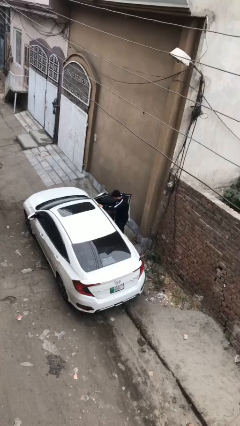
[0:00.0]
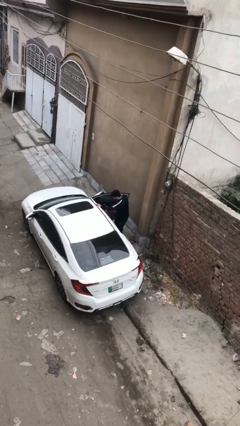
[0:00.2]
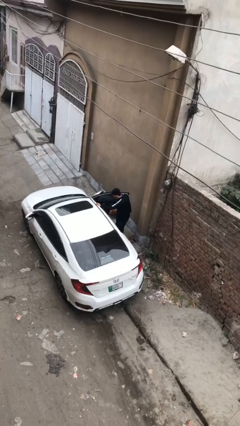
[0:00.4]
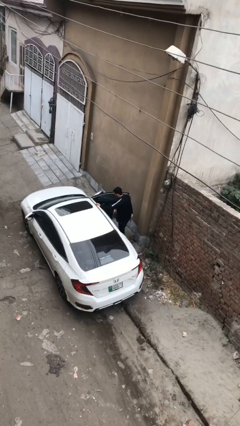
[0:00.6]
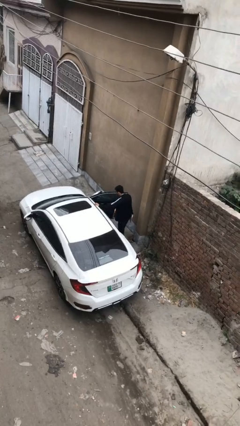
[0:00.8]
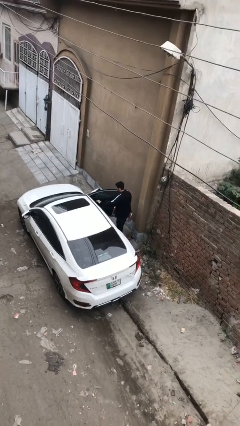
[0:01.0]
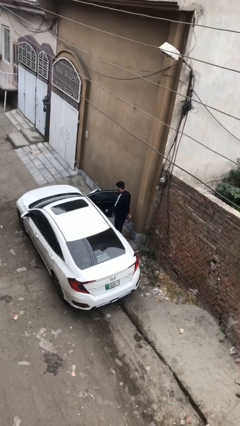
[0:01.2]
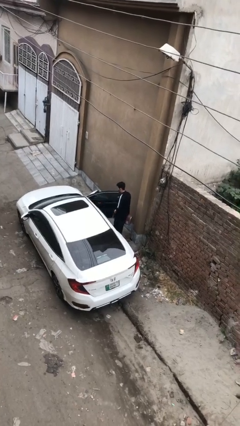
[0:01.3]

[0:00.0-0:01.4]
person unloads car

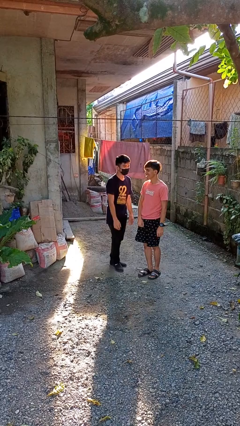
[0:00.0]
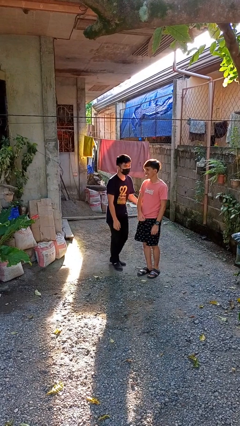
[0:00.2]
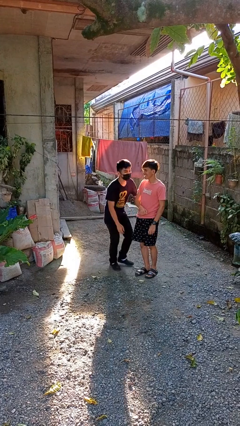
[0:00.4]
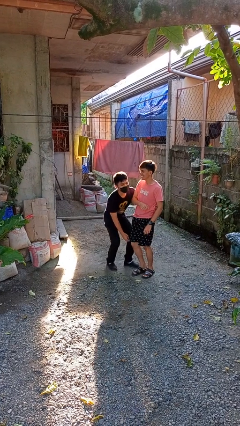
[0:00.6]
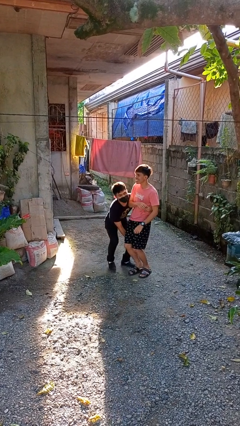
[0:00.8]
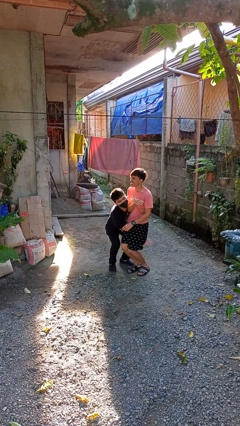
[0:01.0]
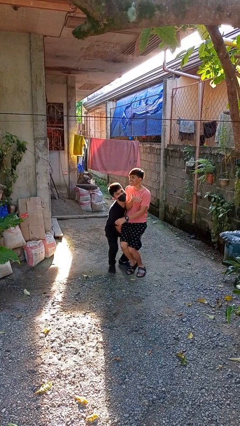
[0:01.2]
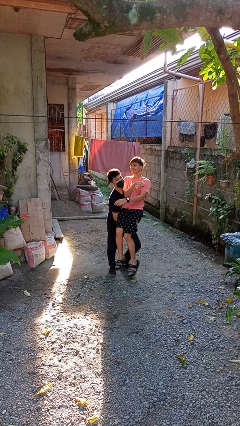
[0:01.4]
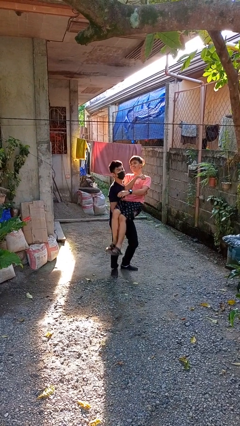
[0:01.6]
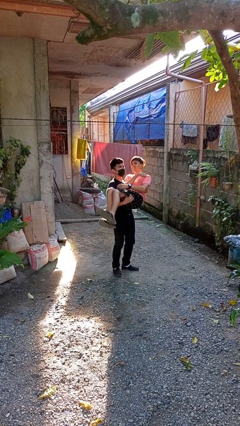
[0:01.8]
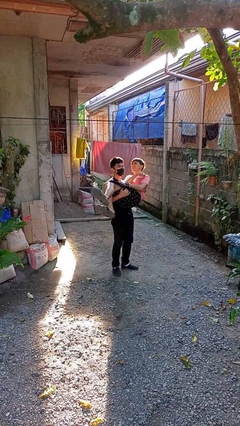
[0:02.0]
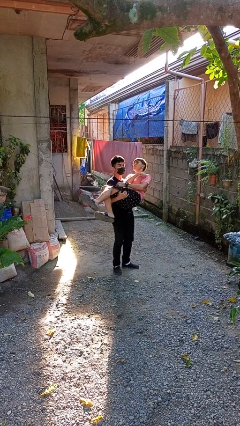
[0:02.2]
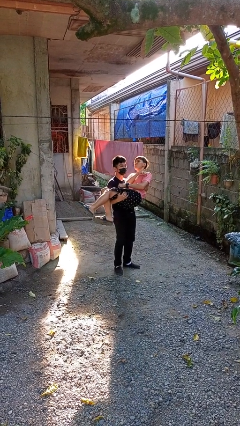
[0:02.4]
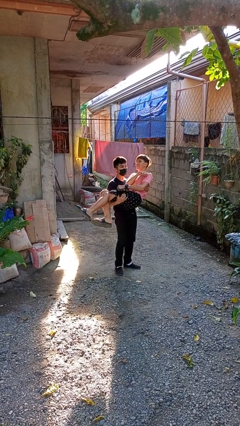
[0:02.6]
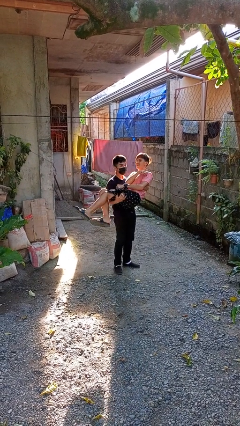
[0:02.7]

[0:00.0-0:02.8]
person picks up person

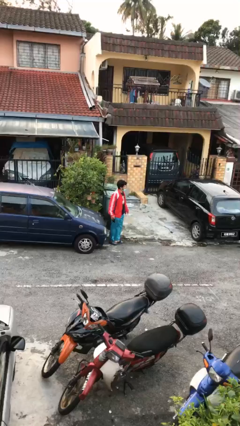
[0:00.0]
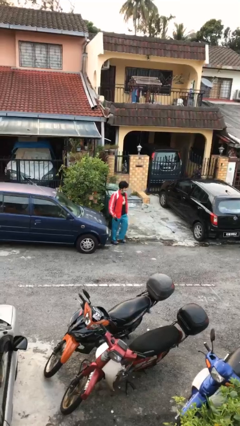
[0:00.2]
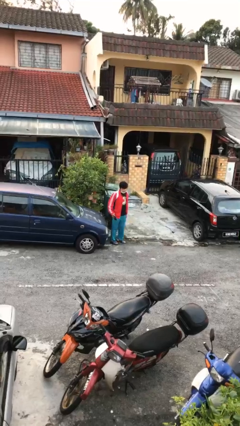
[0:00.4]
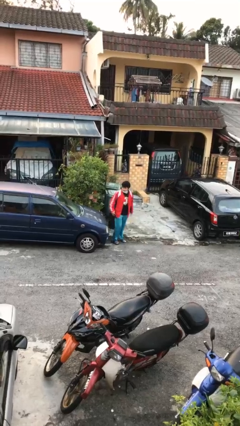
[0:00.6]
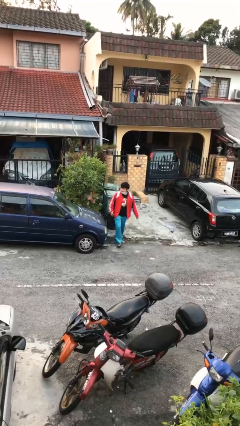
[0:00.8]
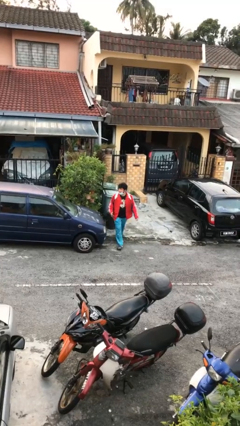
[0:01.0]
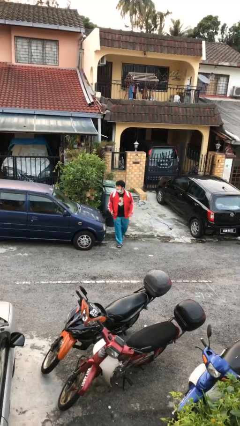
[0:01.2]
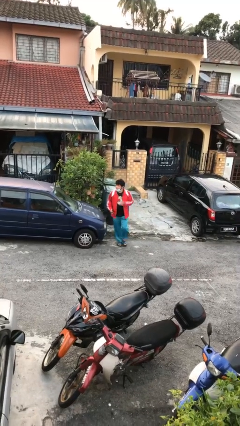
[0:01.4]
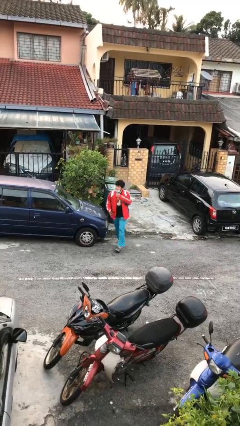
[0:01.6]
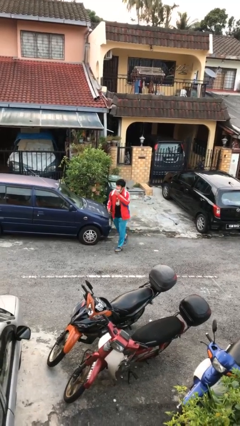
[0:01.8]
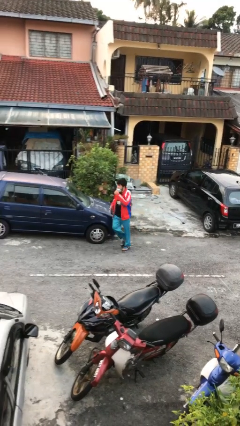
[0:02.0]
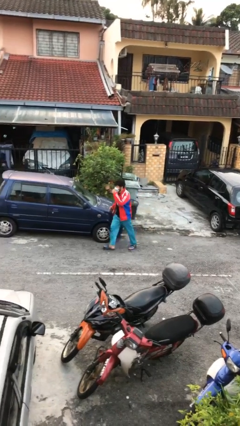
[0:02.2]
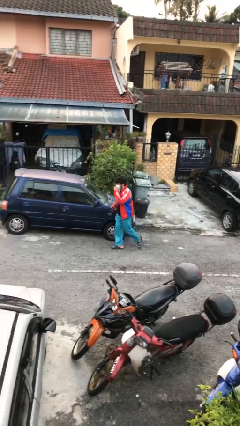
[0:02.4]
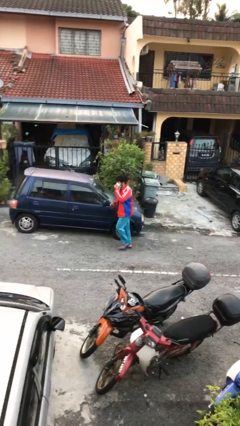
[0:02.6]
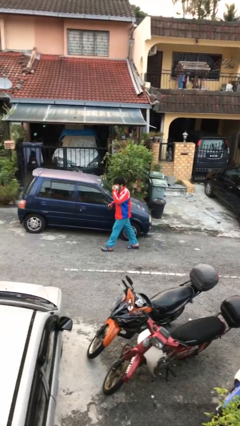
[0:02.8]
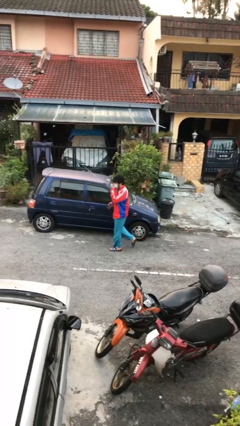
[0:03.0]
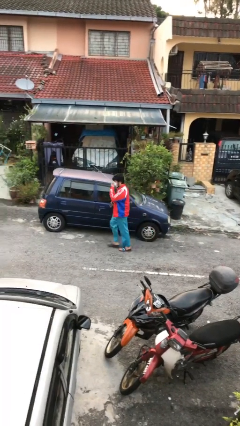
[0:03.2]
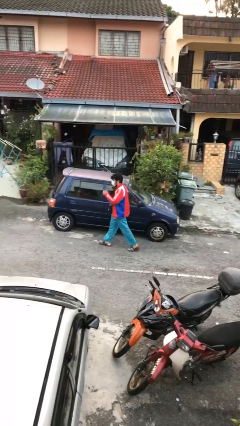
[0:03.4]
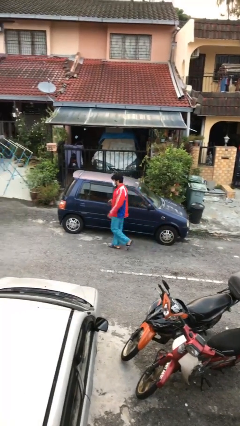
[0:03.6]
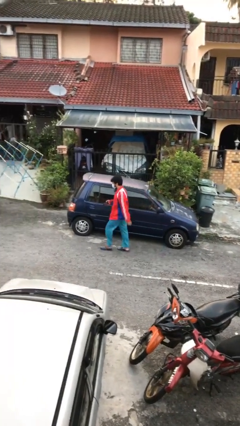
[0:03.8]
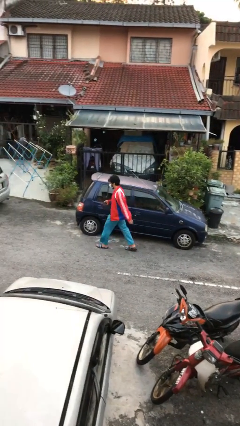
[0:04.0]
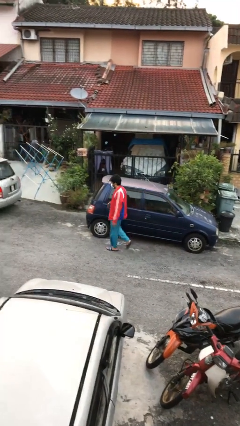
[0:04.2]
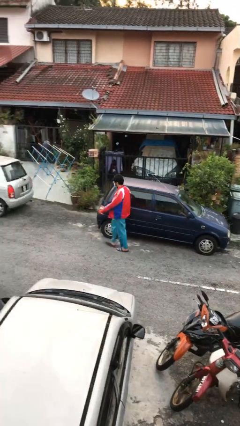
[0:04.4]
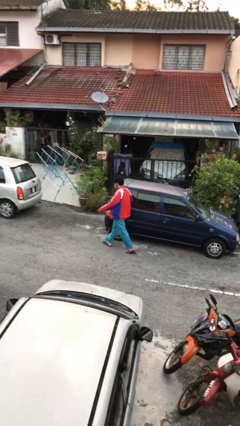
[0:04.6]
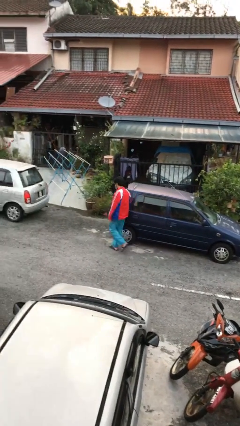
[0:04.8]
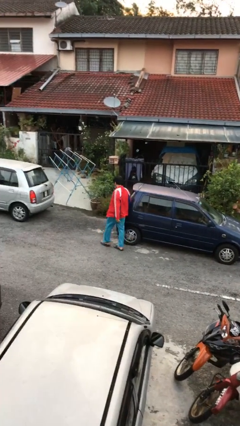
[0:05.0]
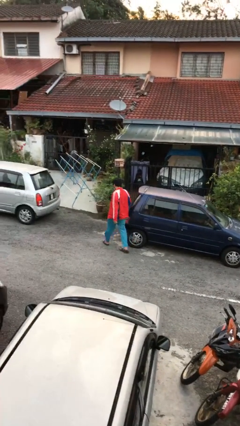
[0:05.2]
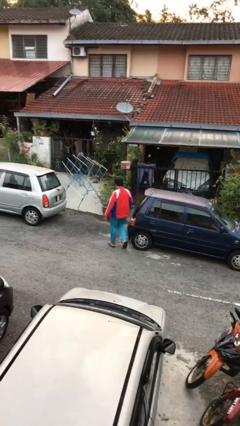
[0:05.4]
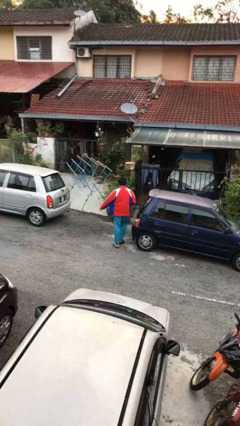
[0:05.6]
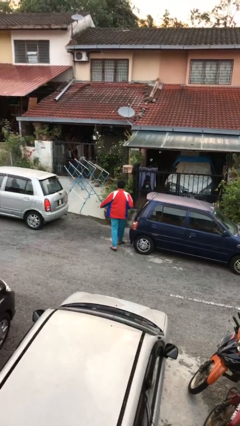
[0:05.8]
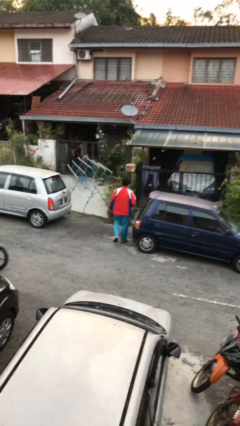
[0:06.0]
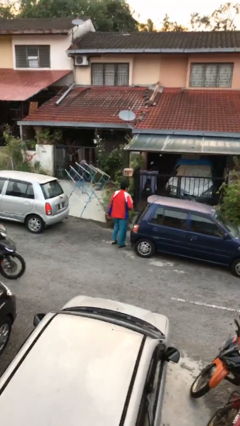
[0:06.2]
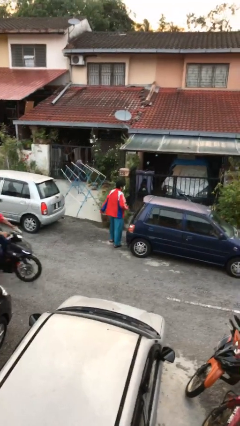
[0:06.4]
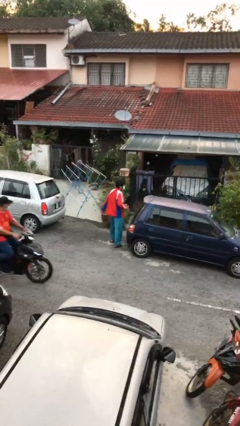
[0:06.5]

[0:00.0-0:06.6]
person walks around car

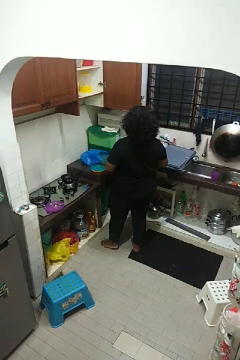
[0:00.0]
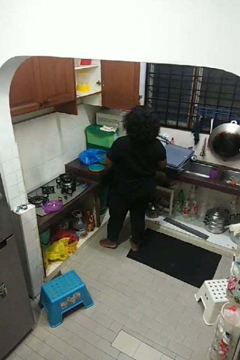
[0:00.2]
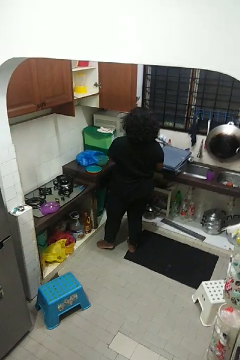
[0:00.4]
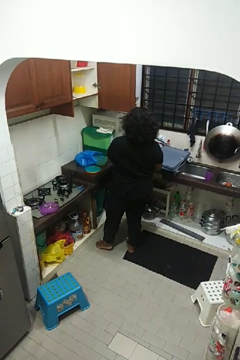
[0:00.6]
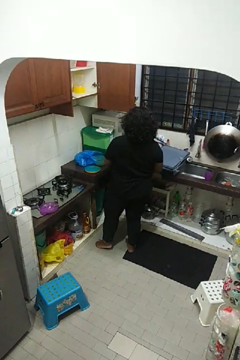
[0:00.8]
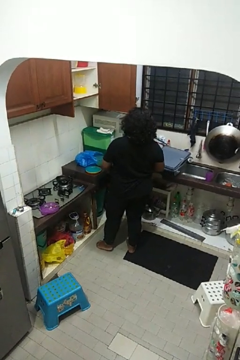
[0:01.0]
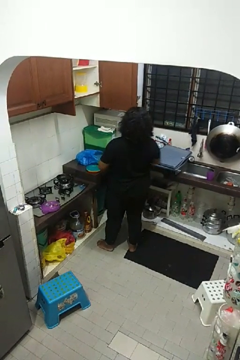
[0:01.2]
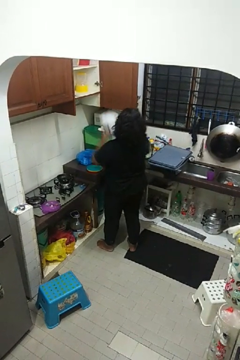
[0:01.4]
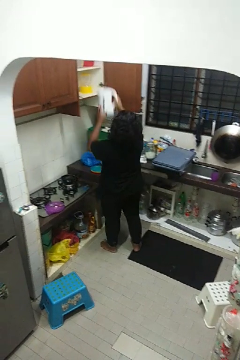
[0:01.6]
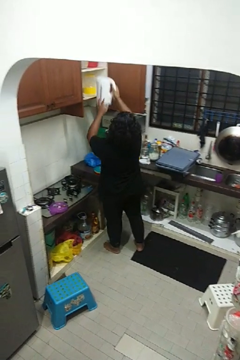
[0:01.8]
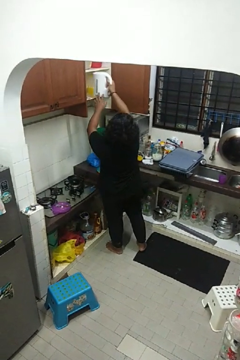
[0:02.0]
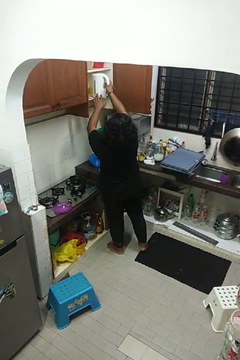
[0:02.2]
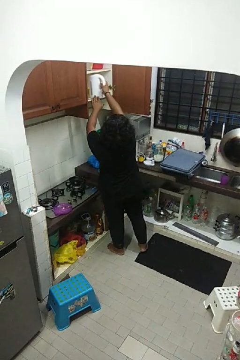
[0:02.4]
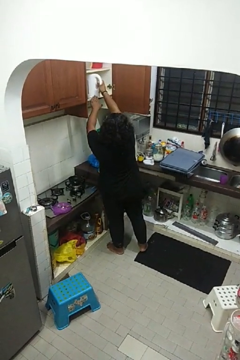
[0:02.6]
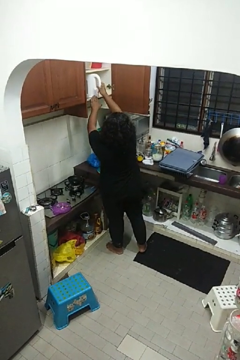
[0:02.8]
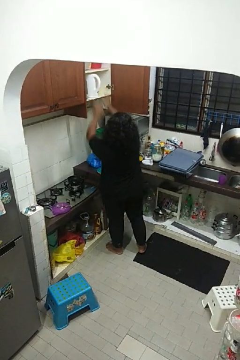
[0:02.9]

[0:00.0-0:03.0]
person puts object in cabinet

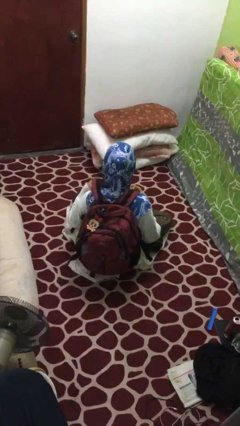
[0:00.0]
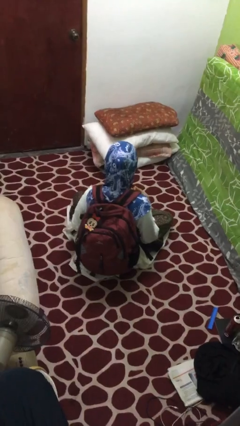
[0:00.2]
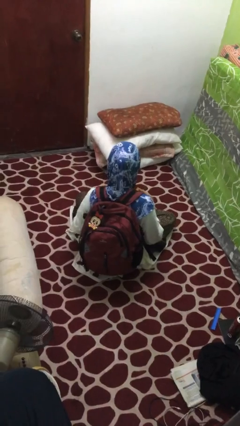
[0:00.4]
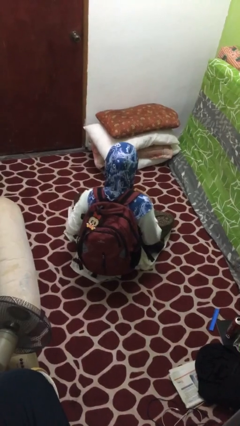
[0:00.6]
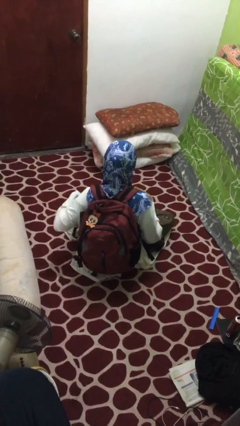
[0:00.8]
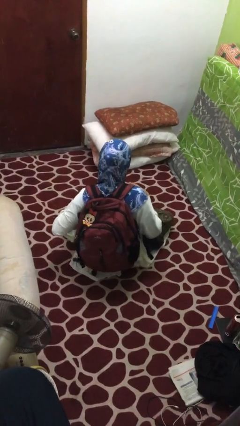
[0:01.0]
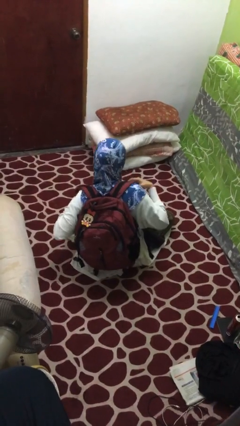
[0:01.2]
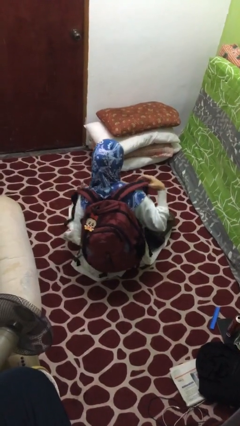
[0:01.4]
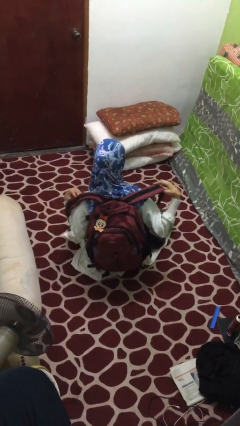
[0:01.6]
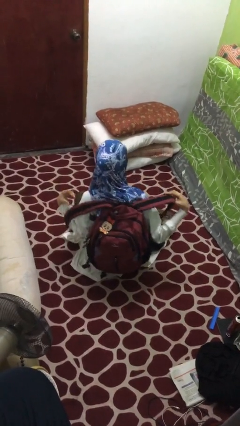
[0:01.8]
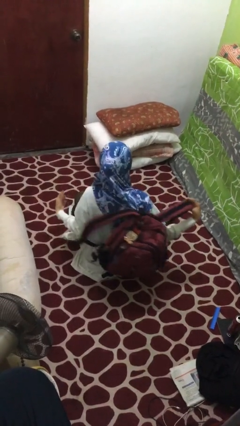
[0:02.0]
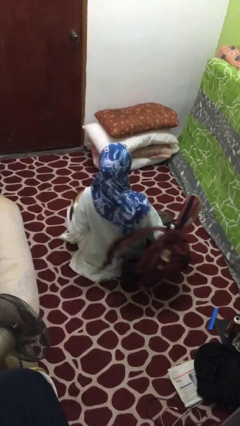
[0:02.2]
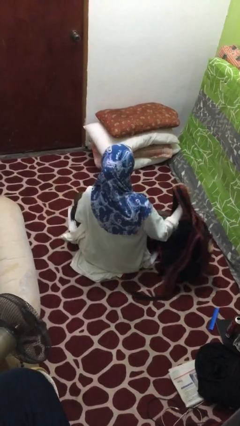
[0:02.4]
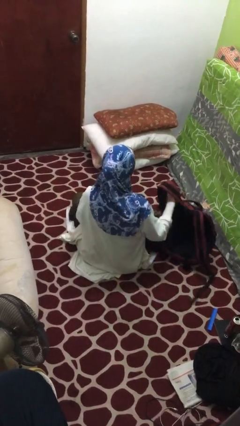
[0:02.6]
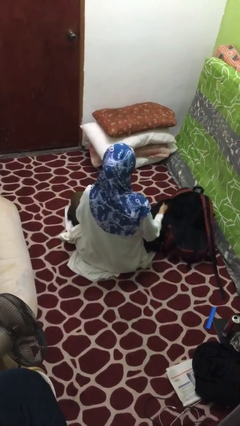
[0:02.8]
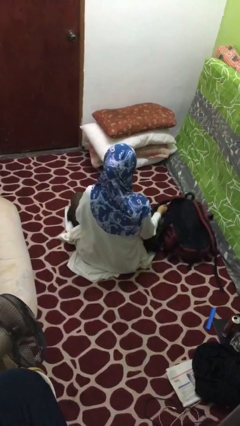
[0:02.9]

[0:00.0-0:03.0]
person takes off backpack

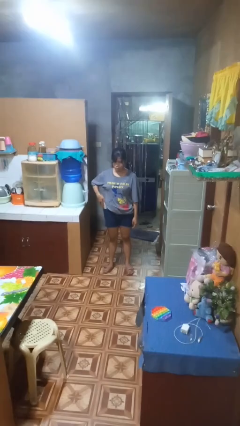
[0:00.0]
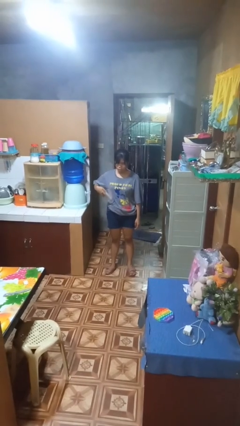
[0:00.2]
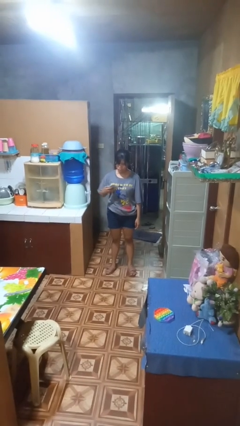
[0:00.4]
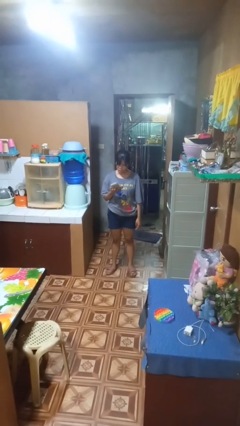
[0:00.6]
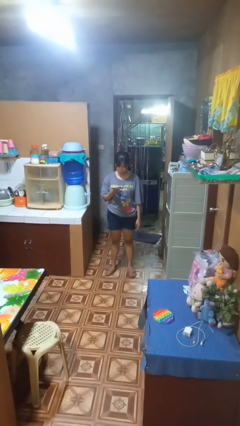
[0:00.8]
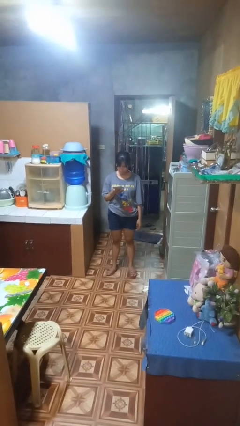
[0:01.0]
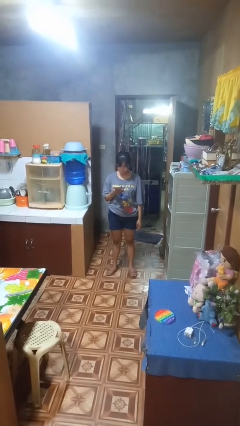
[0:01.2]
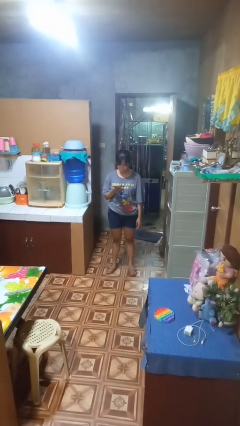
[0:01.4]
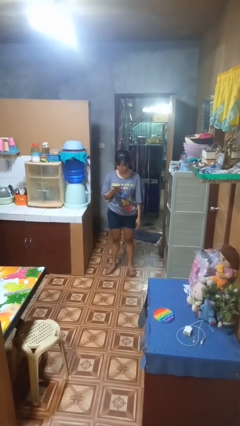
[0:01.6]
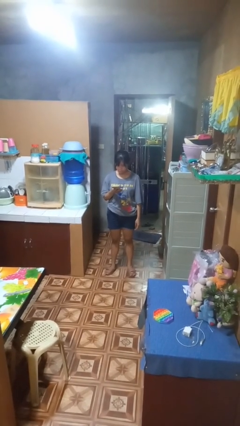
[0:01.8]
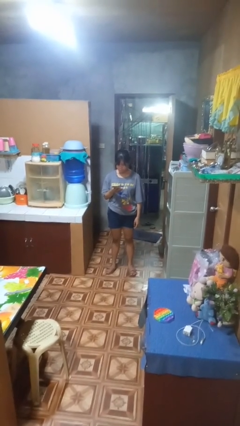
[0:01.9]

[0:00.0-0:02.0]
person takes phone from pocket
